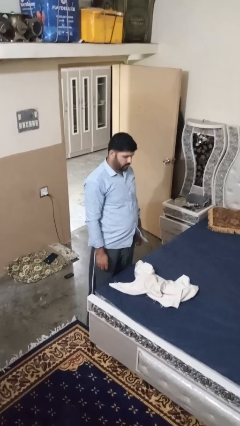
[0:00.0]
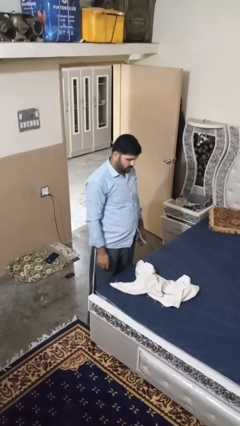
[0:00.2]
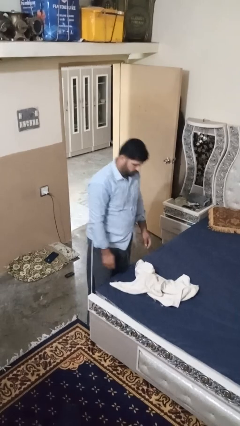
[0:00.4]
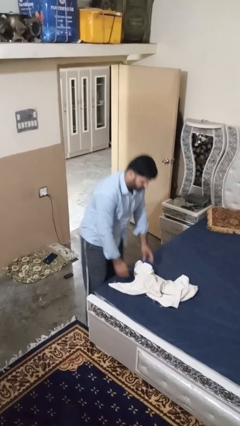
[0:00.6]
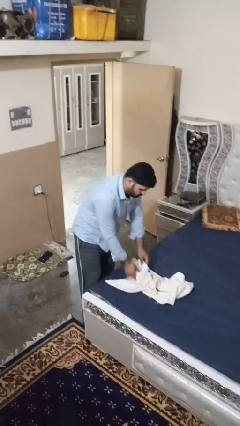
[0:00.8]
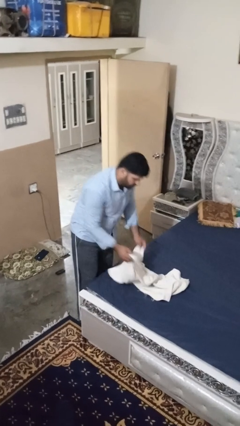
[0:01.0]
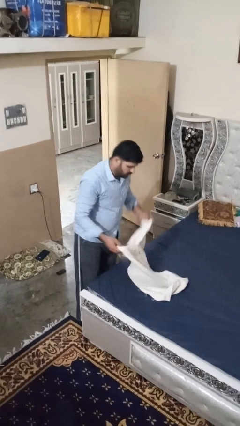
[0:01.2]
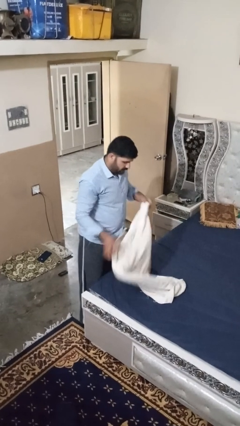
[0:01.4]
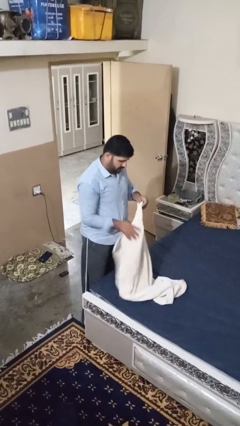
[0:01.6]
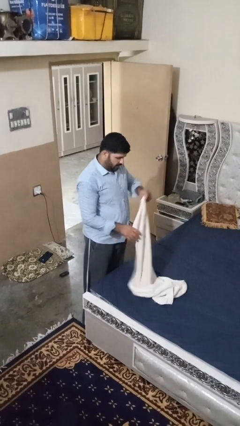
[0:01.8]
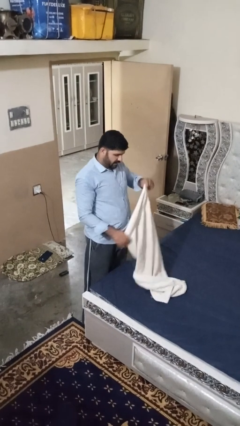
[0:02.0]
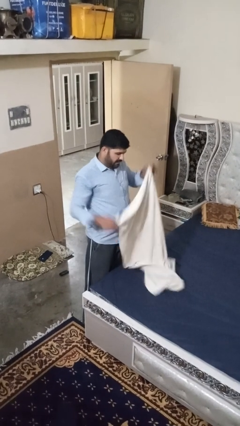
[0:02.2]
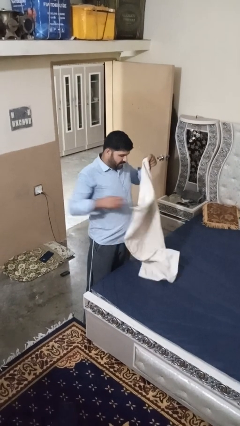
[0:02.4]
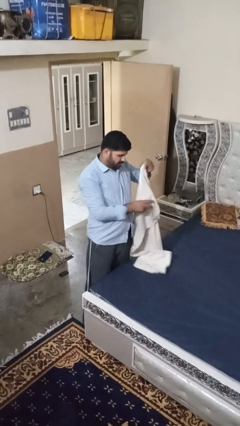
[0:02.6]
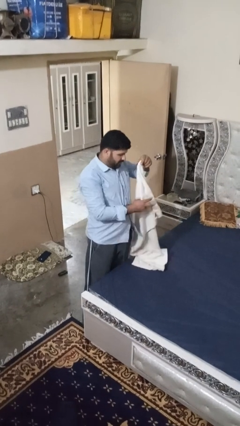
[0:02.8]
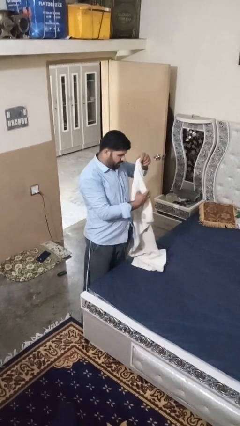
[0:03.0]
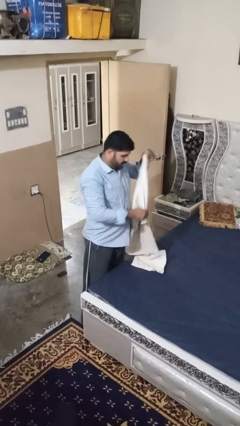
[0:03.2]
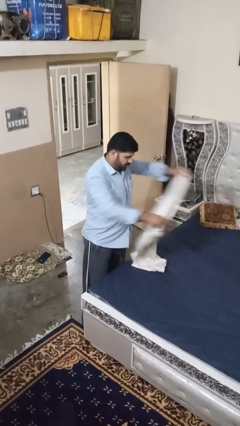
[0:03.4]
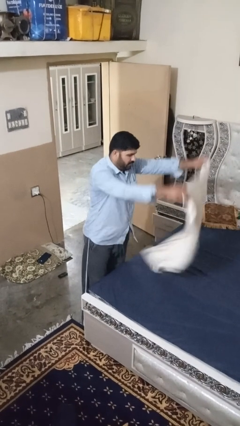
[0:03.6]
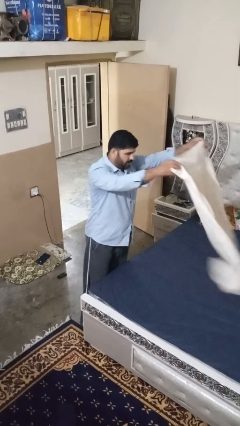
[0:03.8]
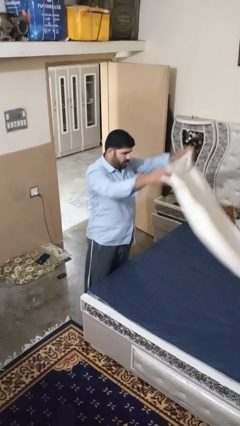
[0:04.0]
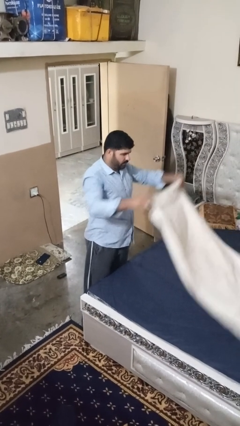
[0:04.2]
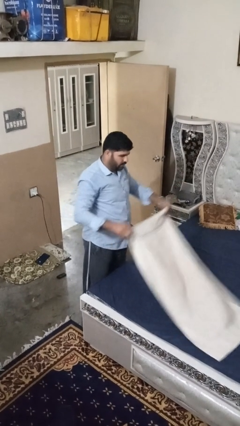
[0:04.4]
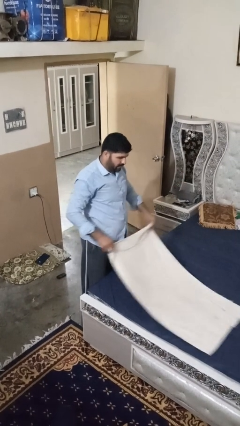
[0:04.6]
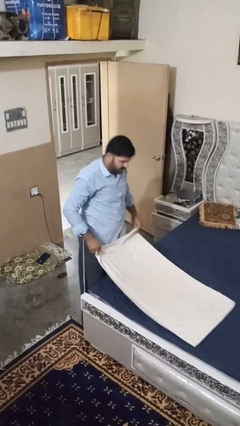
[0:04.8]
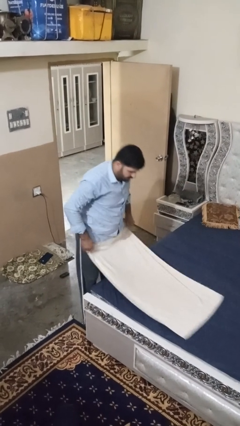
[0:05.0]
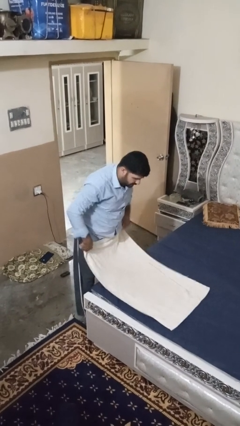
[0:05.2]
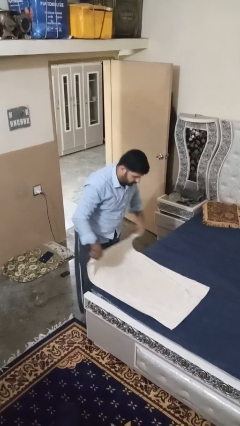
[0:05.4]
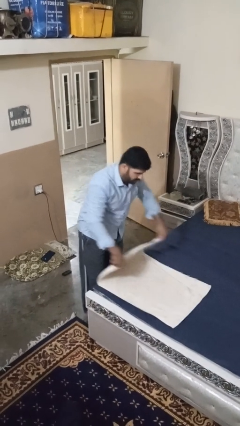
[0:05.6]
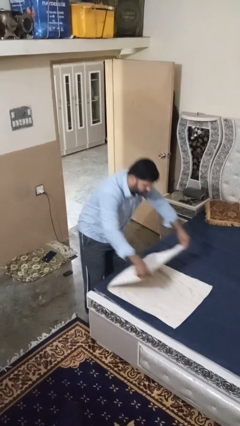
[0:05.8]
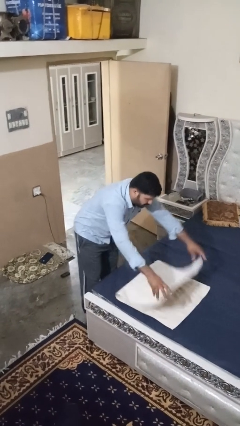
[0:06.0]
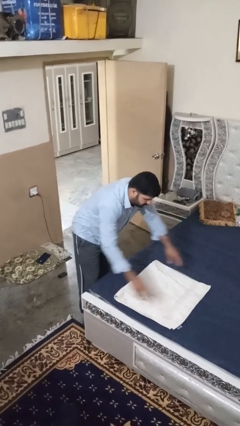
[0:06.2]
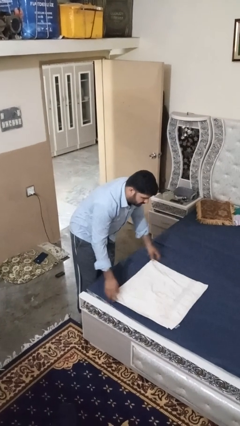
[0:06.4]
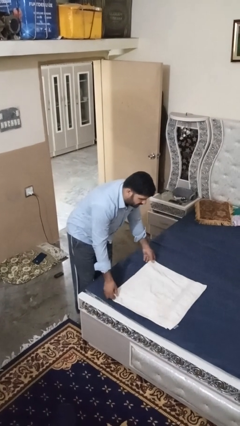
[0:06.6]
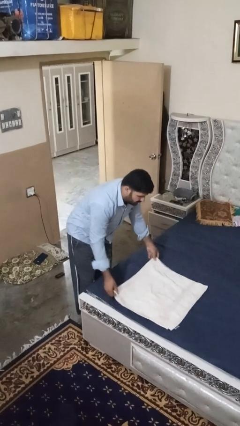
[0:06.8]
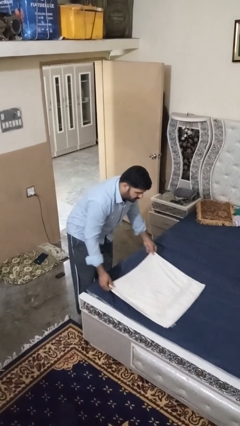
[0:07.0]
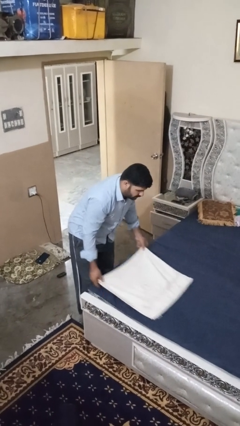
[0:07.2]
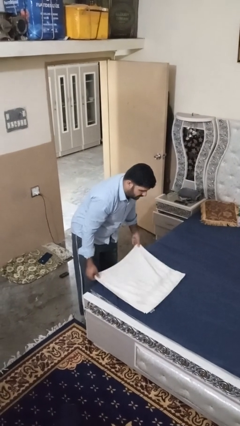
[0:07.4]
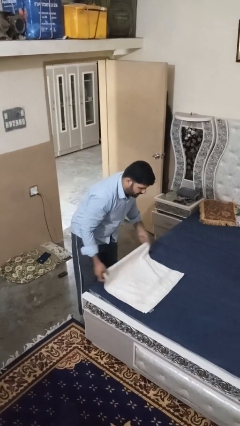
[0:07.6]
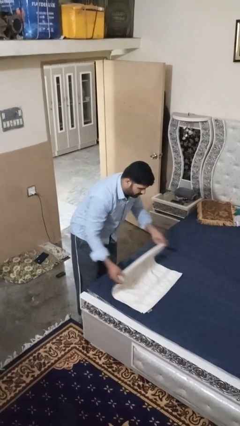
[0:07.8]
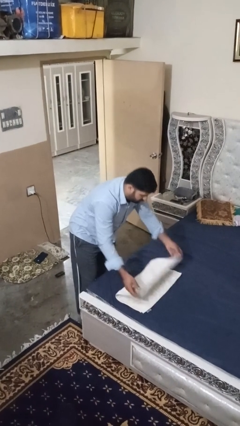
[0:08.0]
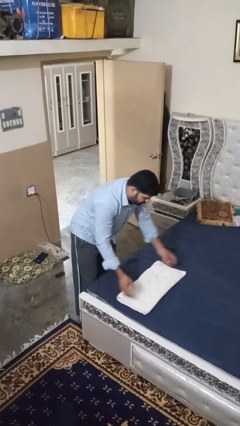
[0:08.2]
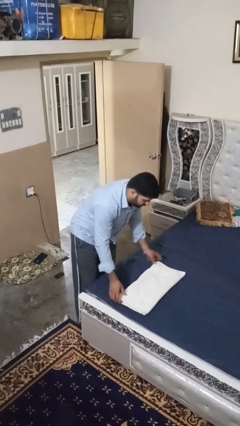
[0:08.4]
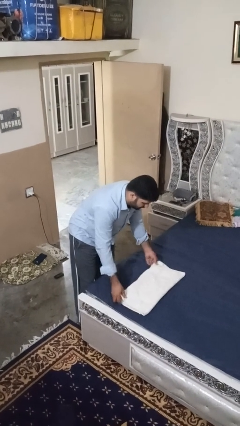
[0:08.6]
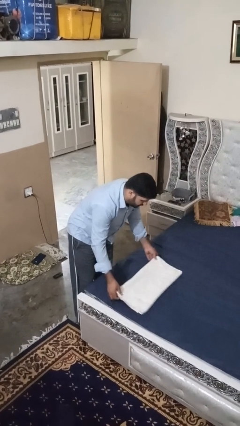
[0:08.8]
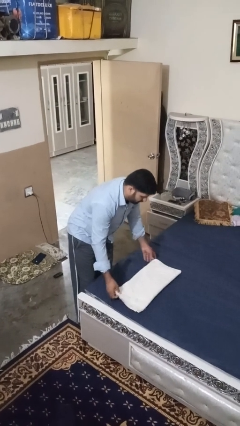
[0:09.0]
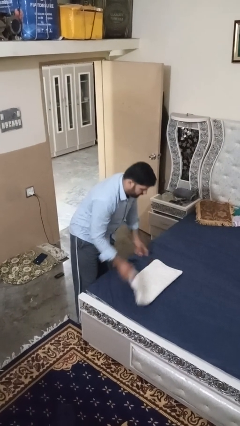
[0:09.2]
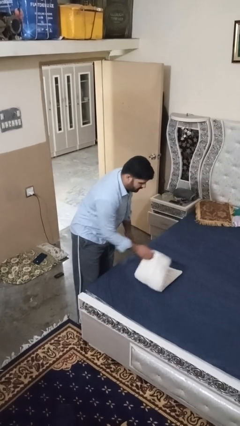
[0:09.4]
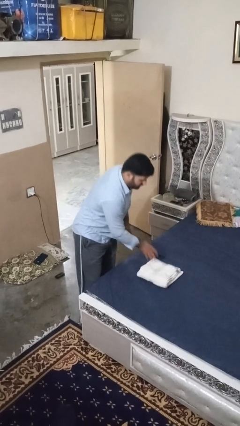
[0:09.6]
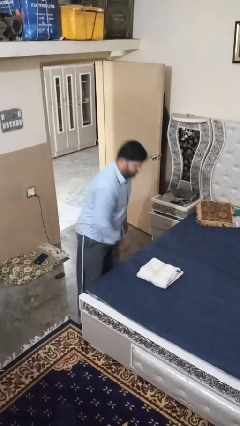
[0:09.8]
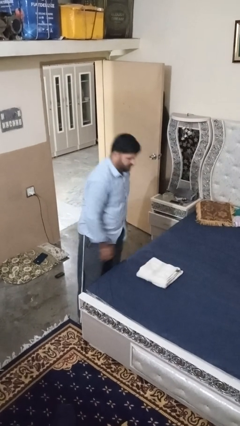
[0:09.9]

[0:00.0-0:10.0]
person folds towel

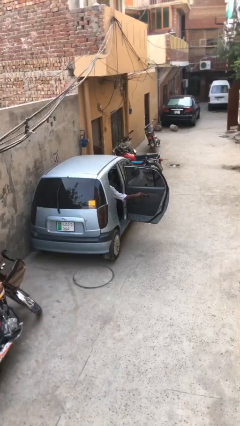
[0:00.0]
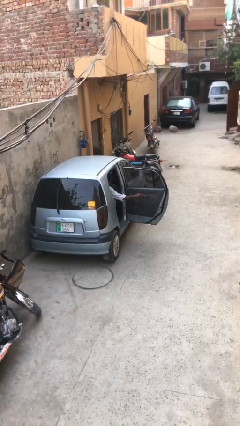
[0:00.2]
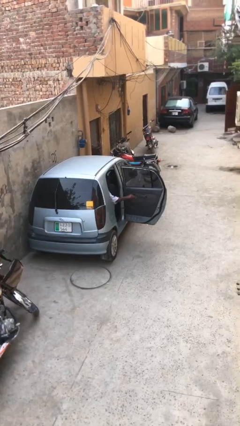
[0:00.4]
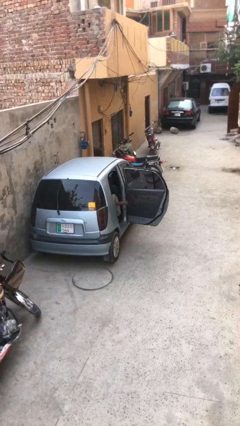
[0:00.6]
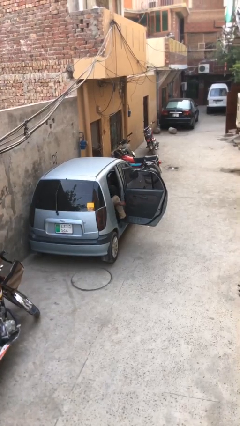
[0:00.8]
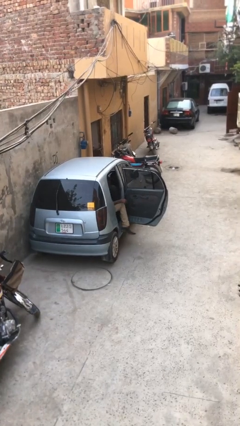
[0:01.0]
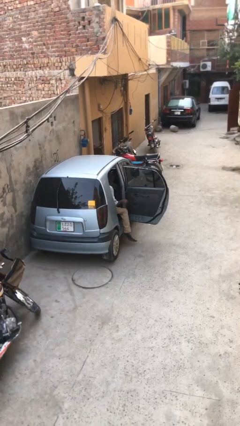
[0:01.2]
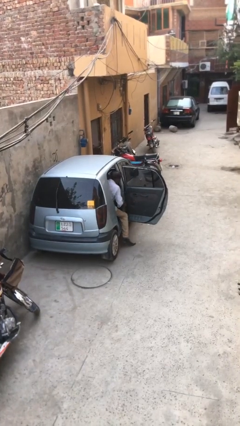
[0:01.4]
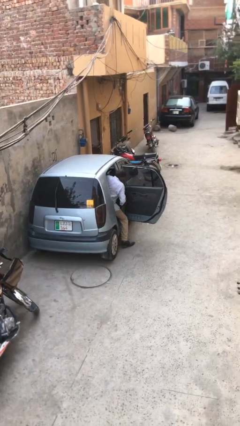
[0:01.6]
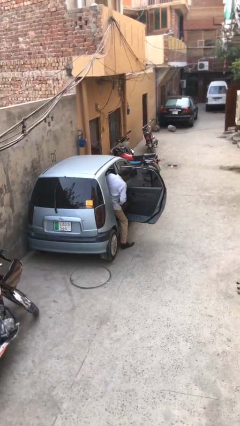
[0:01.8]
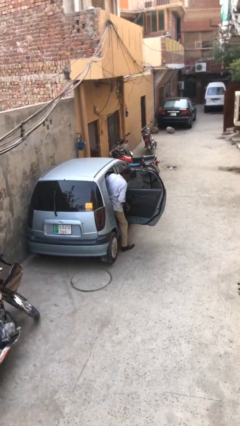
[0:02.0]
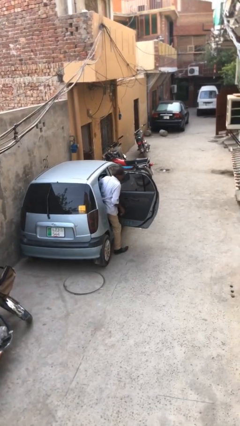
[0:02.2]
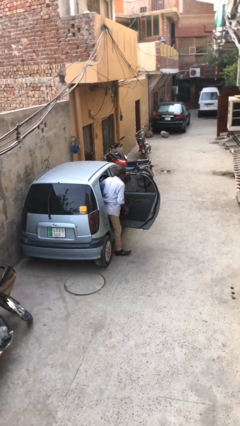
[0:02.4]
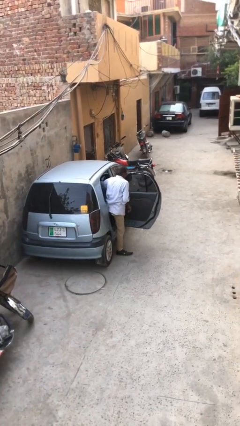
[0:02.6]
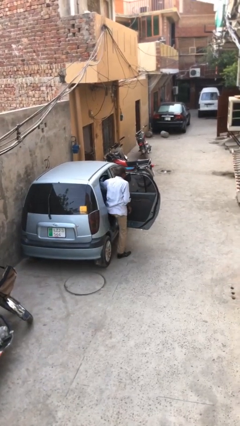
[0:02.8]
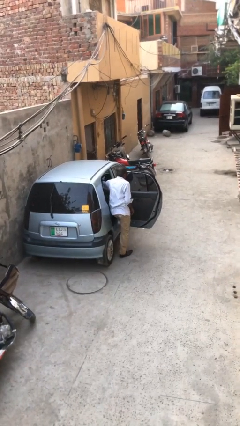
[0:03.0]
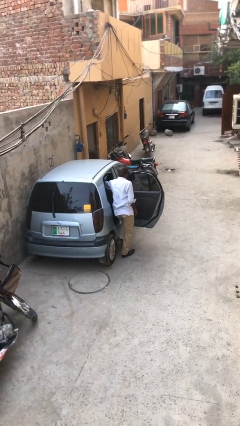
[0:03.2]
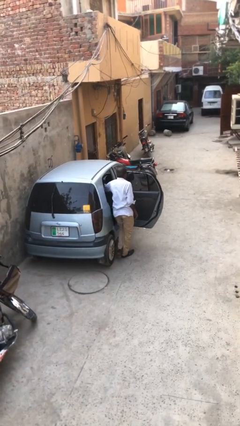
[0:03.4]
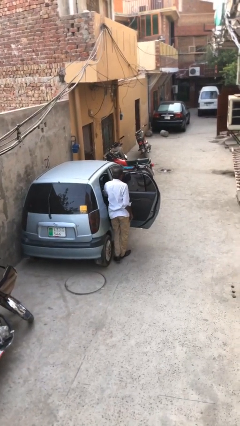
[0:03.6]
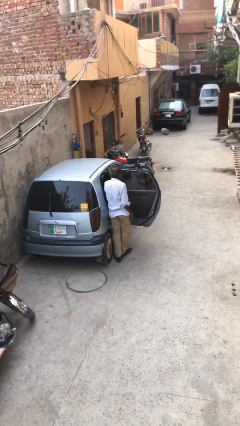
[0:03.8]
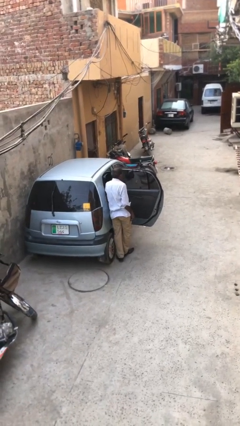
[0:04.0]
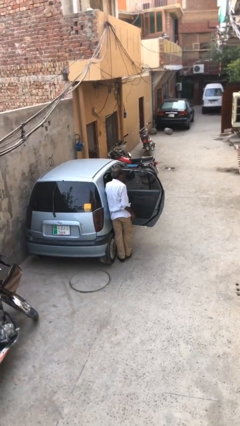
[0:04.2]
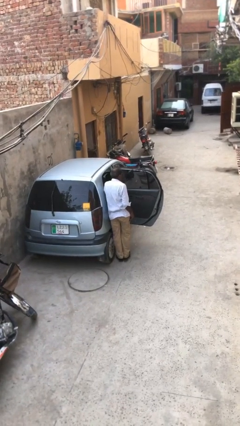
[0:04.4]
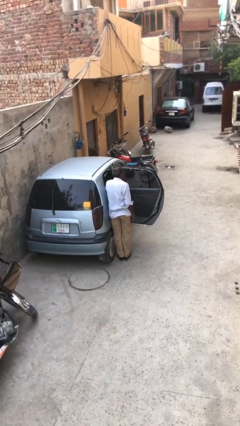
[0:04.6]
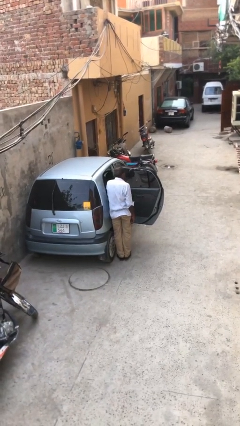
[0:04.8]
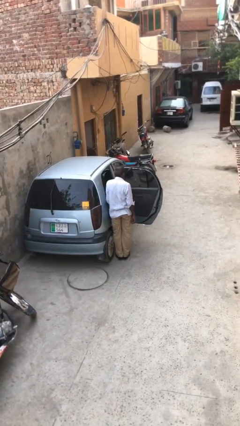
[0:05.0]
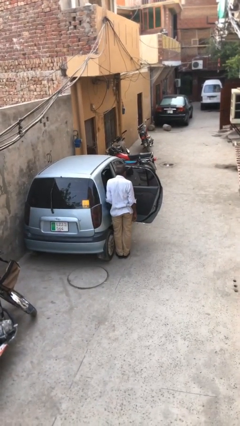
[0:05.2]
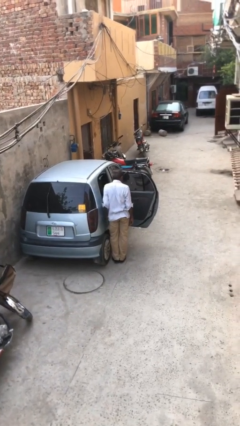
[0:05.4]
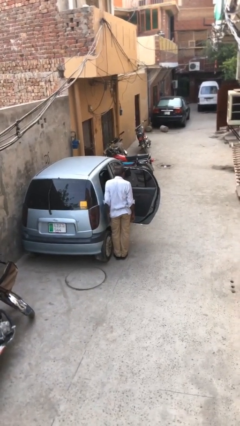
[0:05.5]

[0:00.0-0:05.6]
person exits car

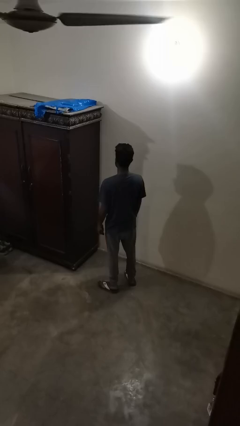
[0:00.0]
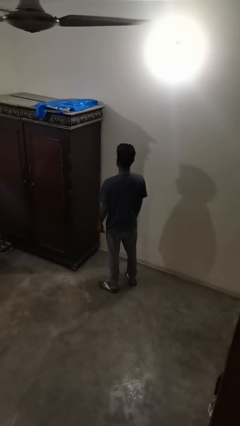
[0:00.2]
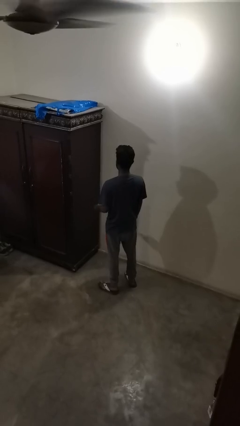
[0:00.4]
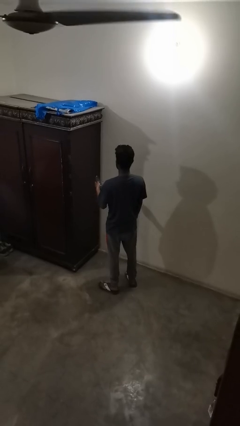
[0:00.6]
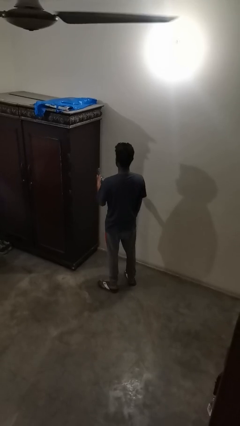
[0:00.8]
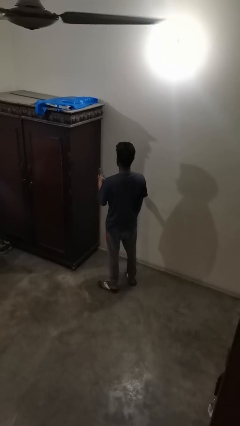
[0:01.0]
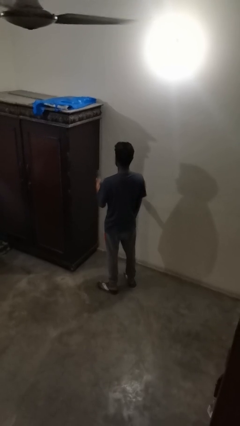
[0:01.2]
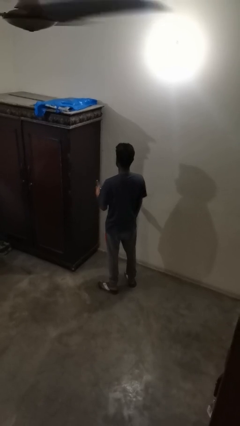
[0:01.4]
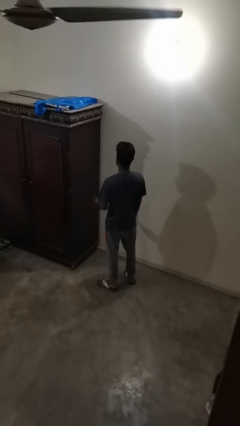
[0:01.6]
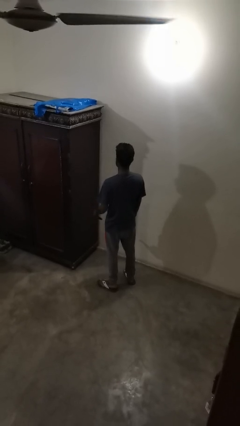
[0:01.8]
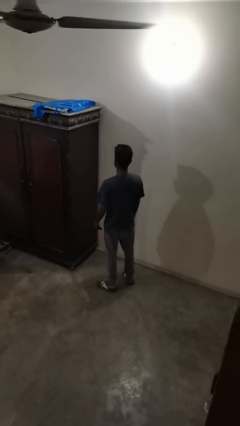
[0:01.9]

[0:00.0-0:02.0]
person uses television remote

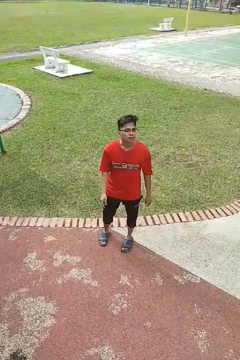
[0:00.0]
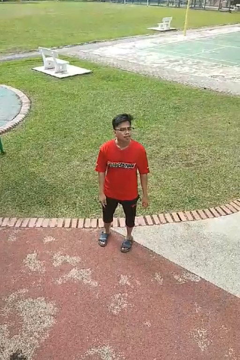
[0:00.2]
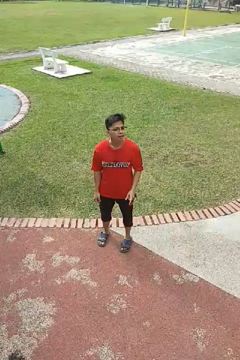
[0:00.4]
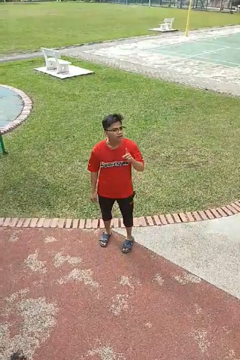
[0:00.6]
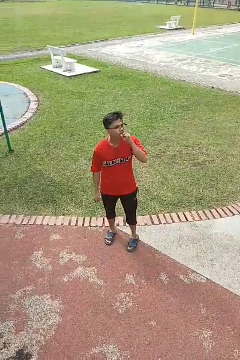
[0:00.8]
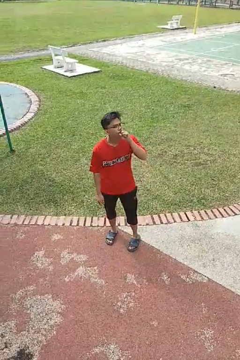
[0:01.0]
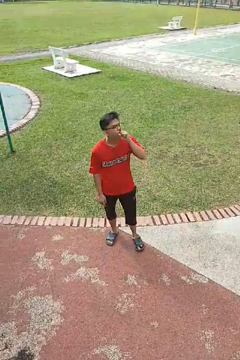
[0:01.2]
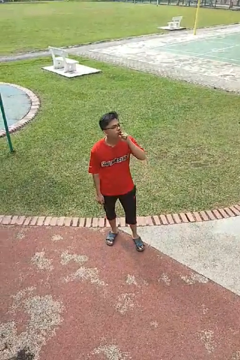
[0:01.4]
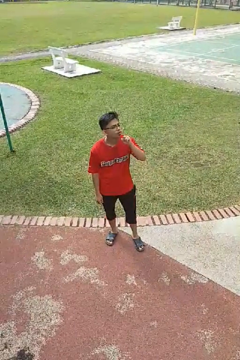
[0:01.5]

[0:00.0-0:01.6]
person gestures be quiet
